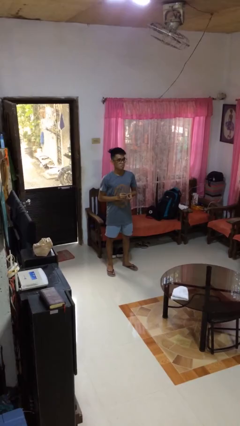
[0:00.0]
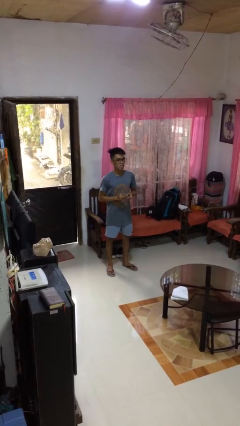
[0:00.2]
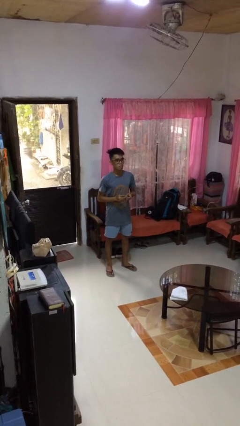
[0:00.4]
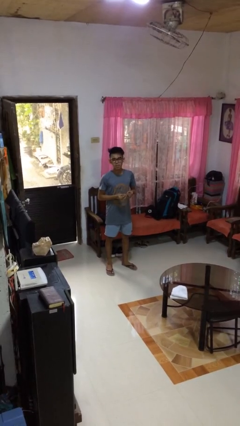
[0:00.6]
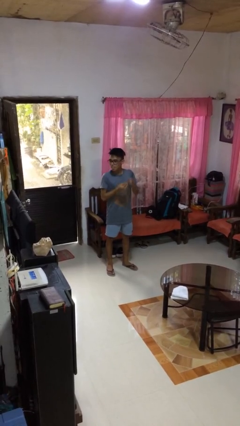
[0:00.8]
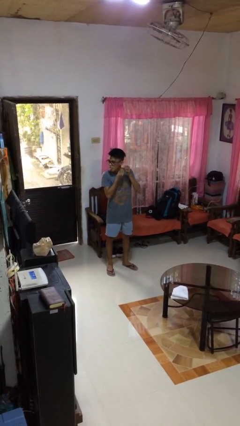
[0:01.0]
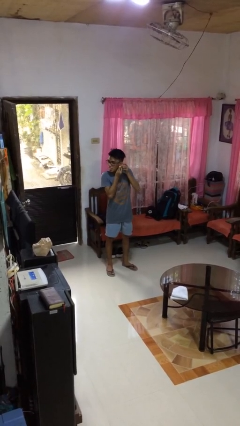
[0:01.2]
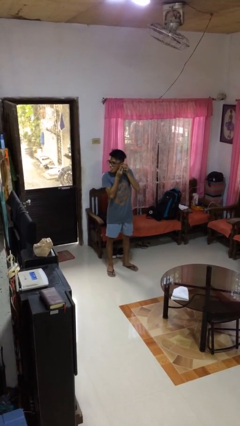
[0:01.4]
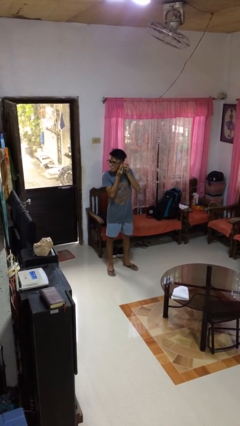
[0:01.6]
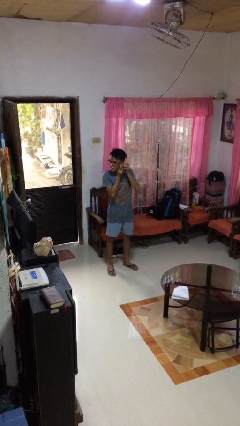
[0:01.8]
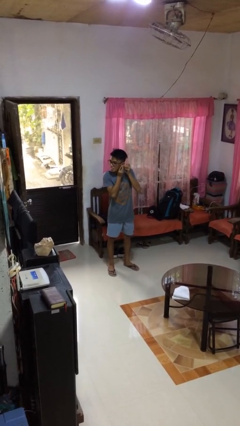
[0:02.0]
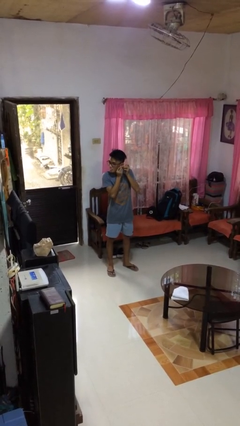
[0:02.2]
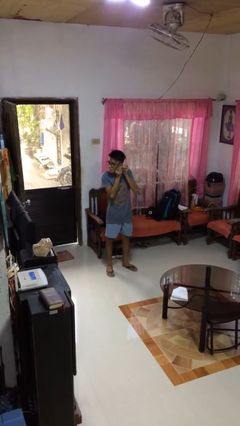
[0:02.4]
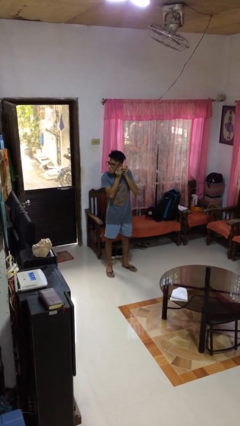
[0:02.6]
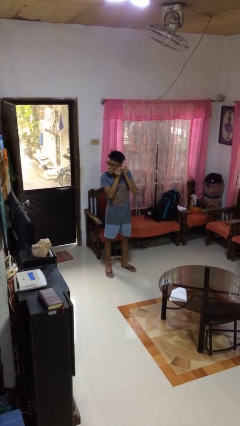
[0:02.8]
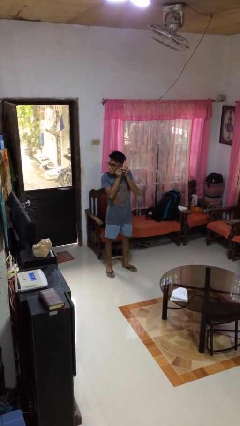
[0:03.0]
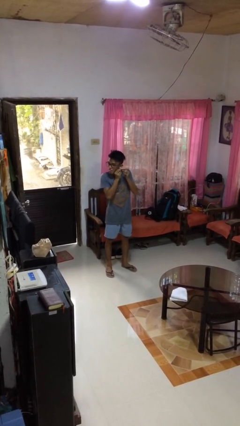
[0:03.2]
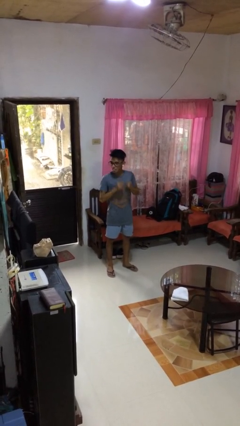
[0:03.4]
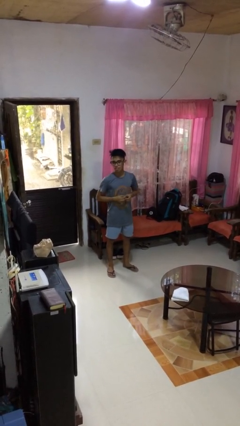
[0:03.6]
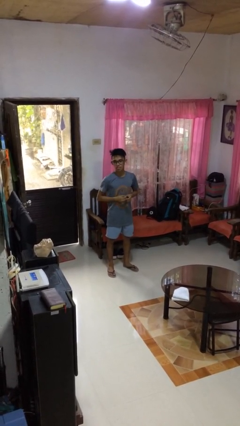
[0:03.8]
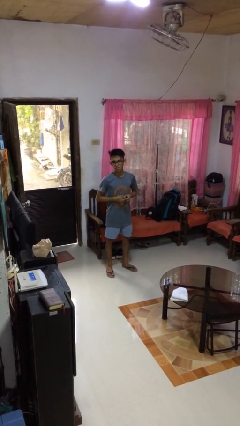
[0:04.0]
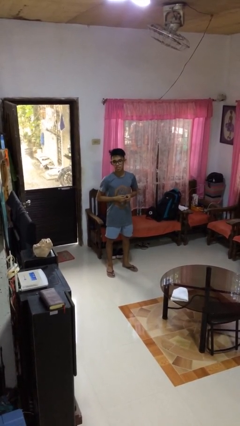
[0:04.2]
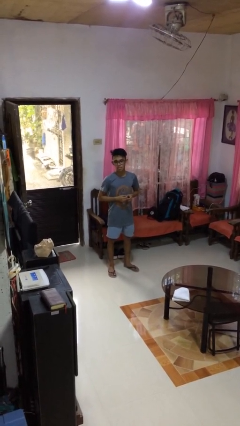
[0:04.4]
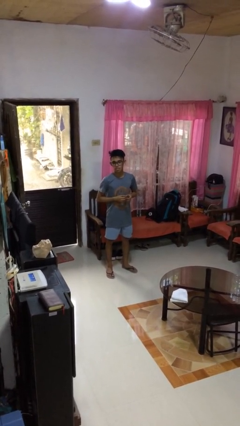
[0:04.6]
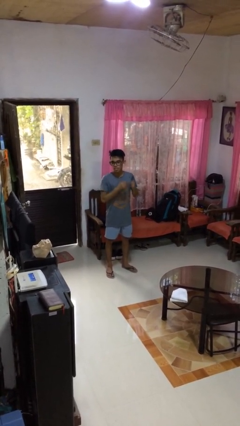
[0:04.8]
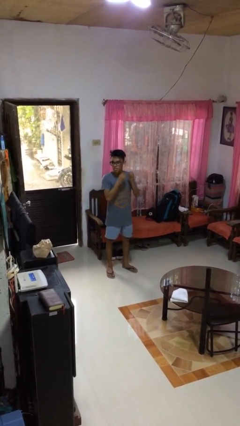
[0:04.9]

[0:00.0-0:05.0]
person puts on earrings

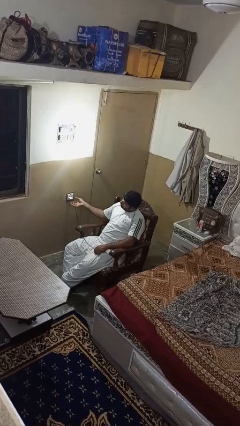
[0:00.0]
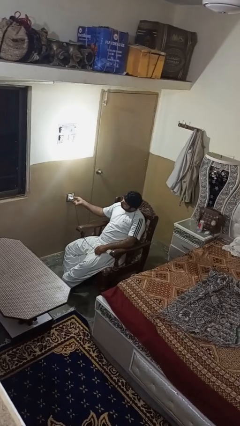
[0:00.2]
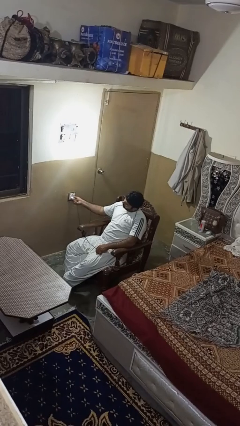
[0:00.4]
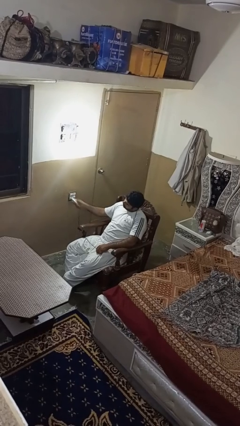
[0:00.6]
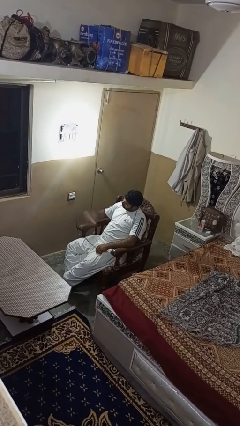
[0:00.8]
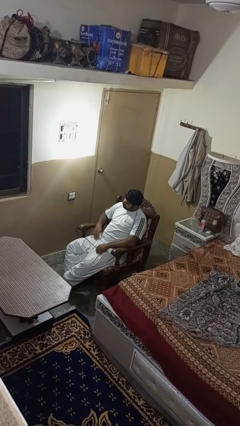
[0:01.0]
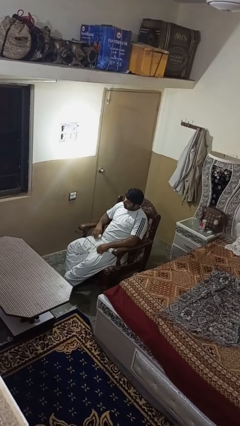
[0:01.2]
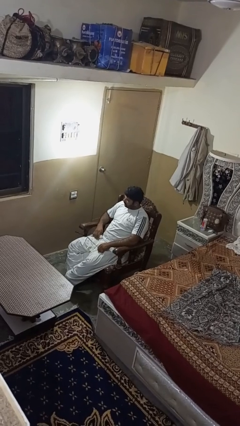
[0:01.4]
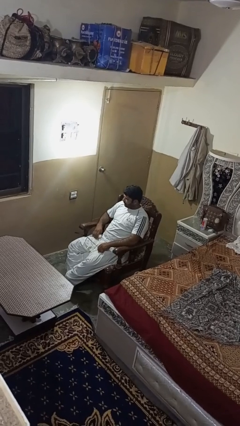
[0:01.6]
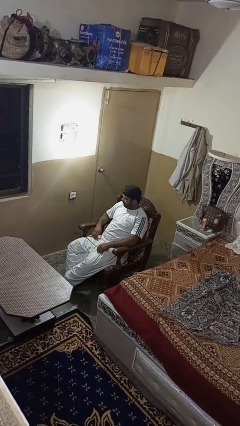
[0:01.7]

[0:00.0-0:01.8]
person unplugs from electrical socket

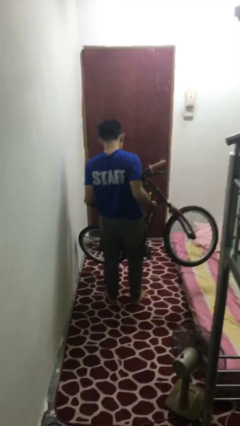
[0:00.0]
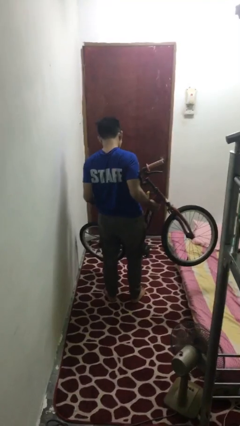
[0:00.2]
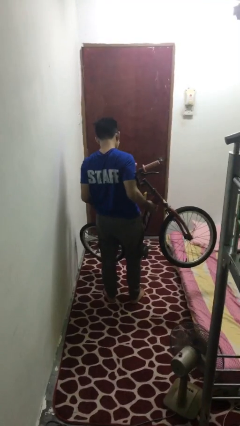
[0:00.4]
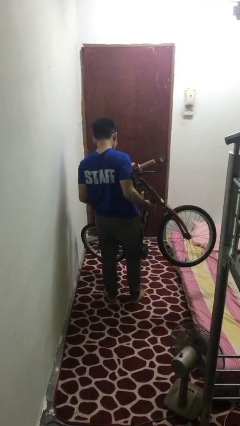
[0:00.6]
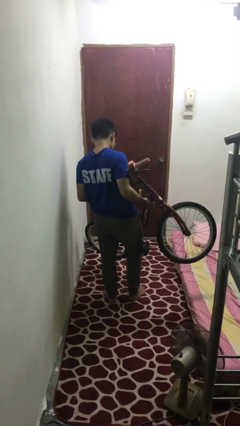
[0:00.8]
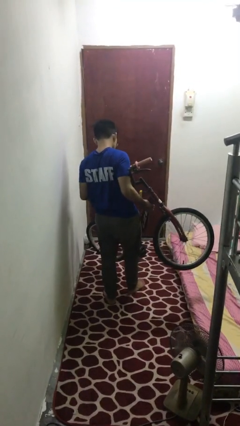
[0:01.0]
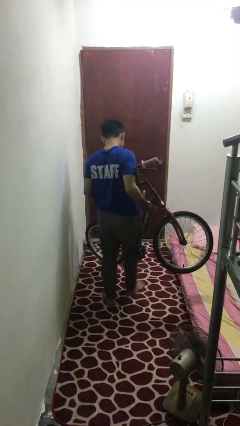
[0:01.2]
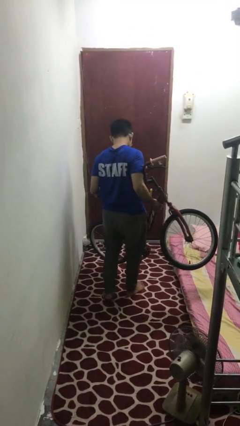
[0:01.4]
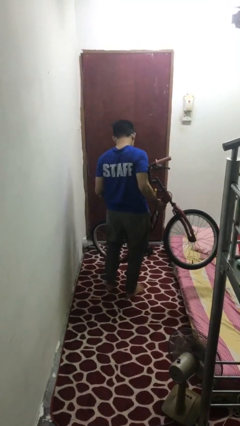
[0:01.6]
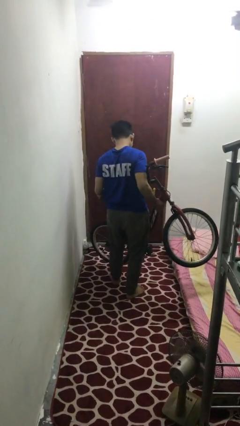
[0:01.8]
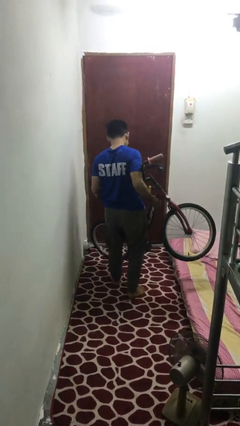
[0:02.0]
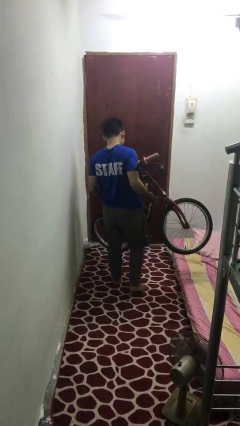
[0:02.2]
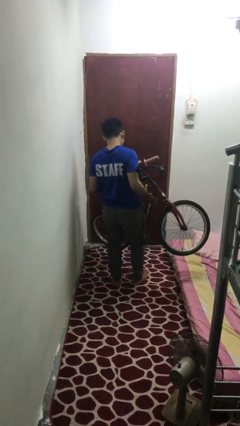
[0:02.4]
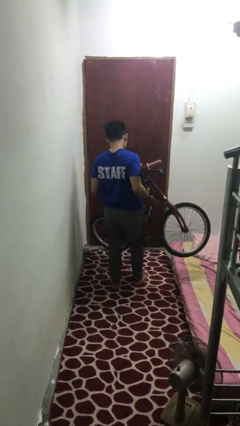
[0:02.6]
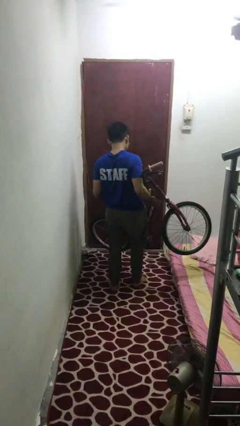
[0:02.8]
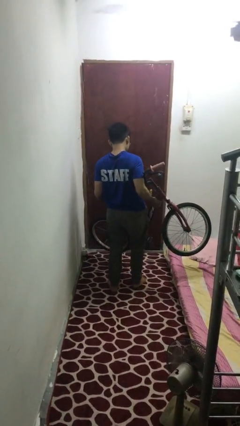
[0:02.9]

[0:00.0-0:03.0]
person carries bicycle

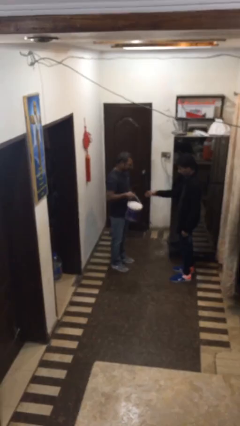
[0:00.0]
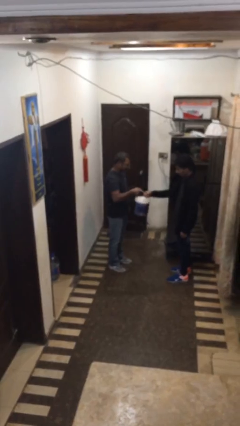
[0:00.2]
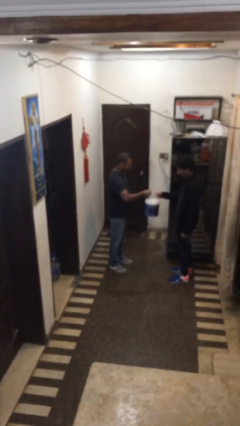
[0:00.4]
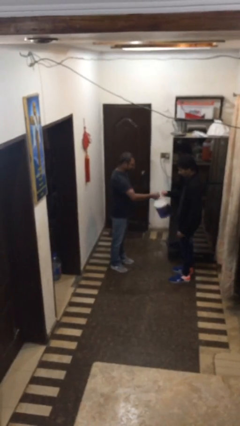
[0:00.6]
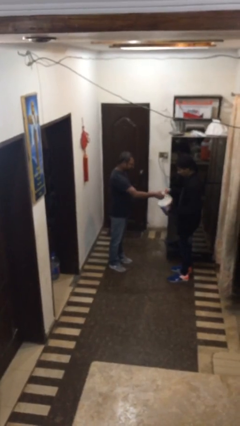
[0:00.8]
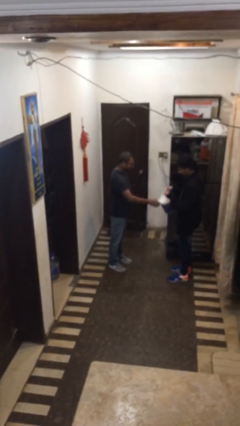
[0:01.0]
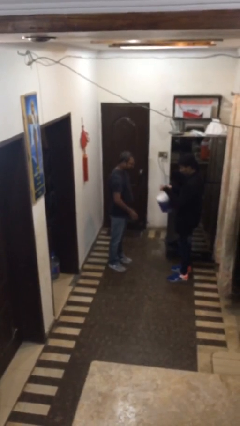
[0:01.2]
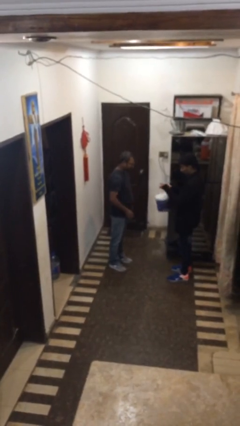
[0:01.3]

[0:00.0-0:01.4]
person transfers object to person

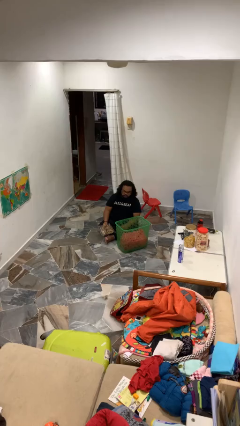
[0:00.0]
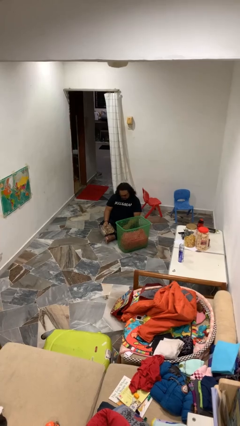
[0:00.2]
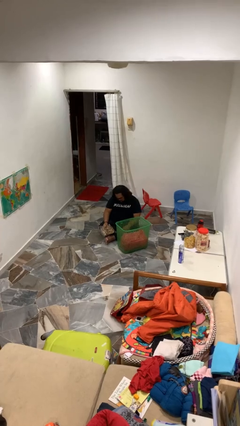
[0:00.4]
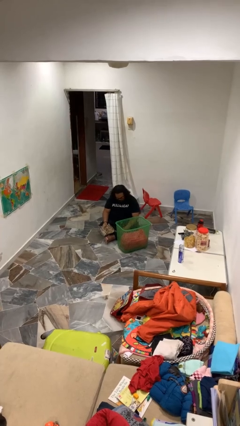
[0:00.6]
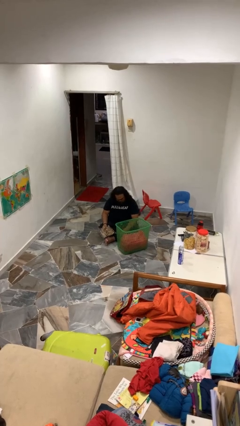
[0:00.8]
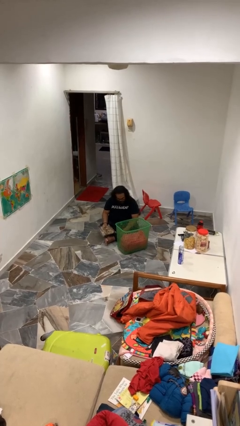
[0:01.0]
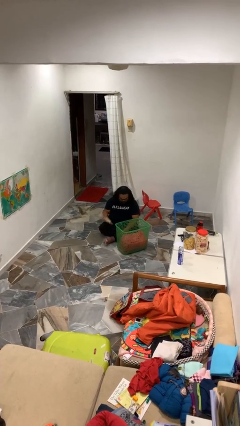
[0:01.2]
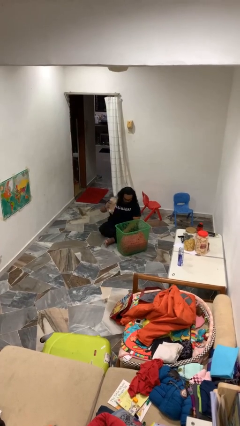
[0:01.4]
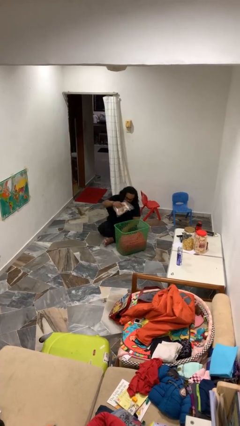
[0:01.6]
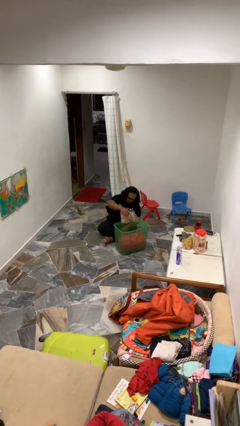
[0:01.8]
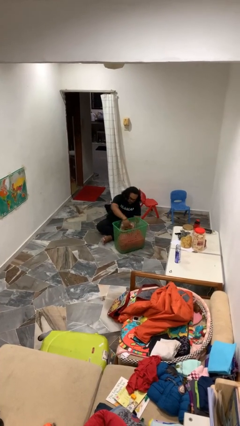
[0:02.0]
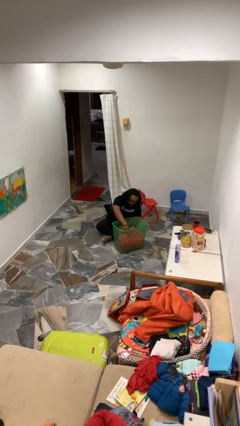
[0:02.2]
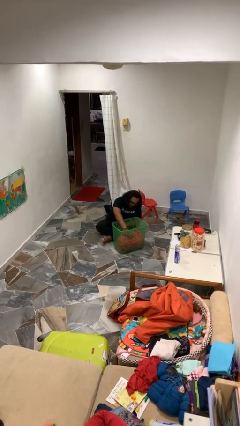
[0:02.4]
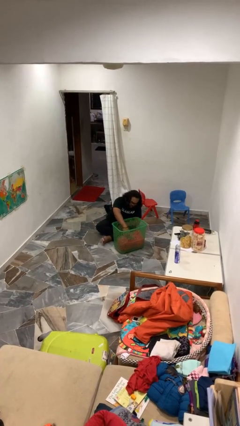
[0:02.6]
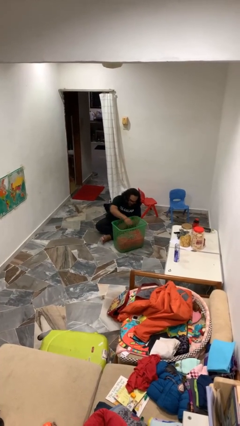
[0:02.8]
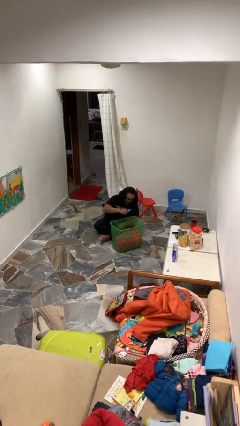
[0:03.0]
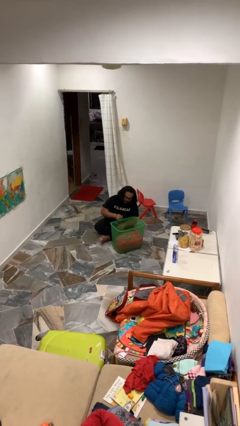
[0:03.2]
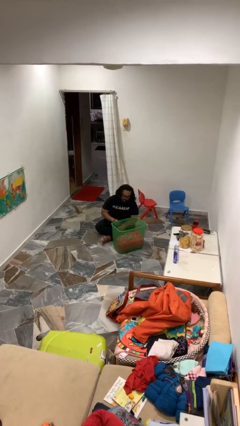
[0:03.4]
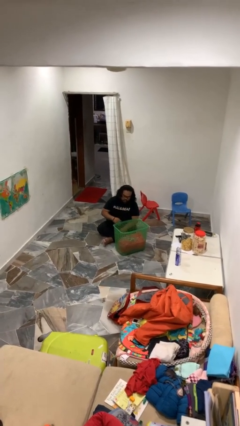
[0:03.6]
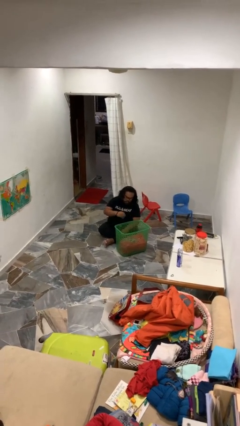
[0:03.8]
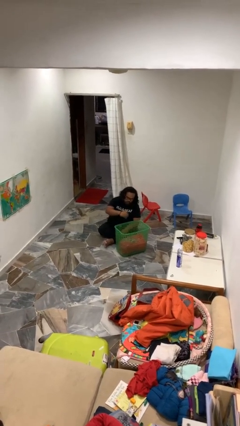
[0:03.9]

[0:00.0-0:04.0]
person puts object into basket

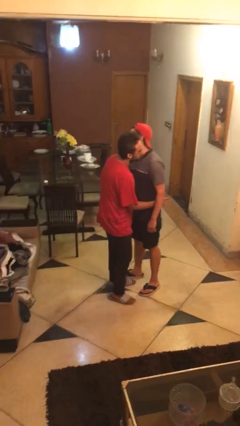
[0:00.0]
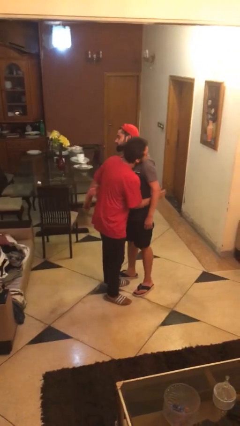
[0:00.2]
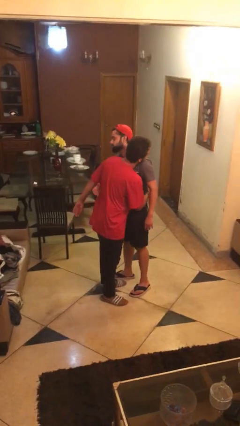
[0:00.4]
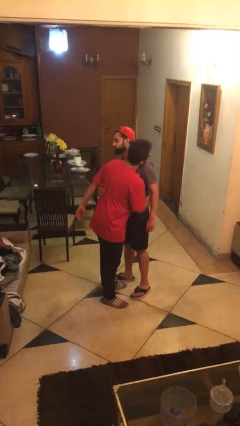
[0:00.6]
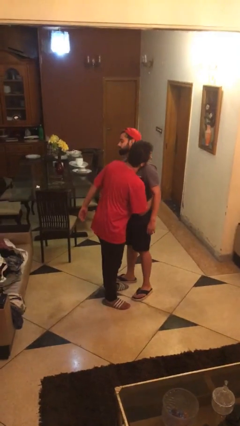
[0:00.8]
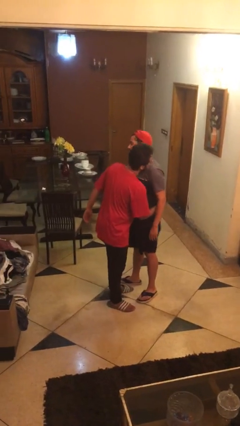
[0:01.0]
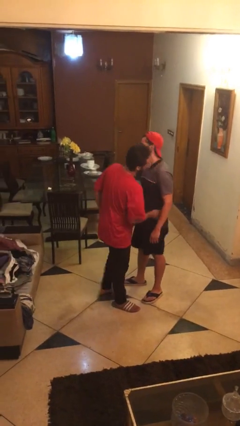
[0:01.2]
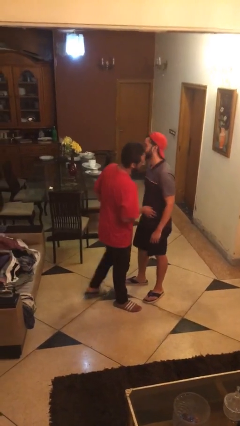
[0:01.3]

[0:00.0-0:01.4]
person embraces person

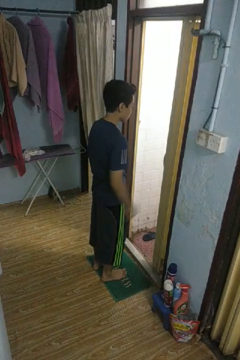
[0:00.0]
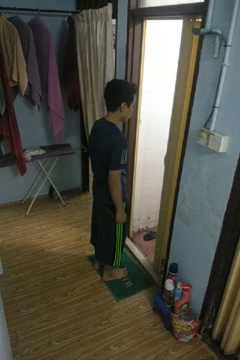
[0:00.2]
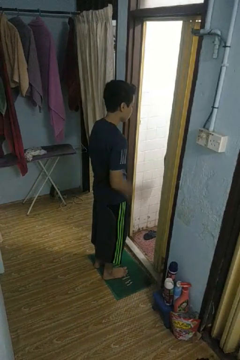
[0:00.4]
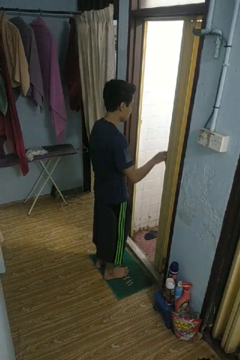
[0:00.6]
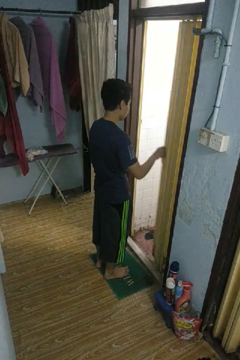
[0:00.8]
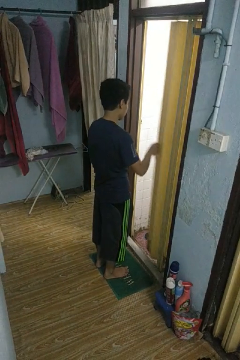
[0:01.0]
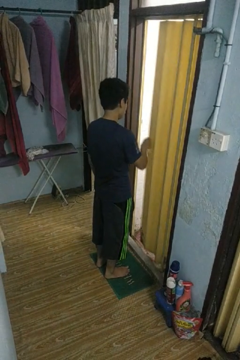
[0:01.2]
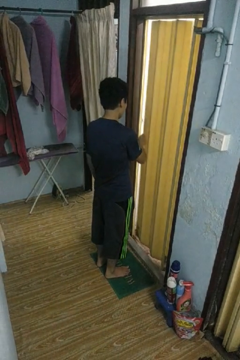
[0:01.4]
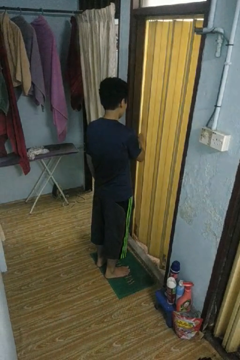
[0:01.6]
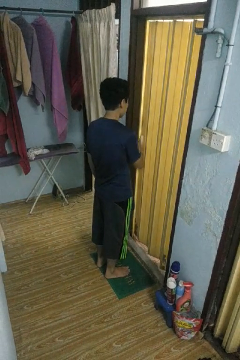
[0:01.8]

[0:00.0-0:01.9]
person closes sliding door
